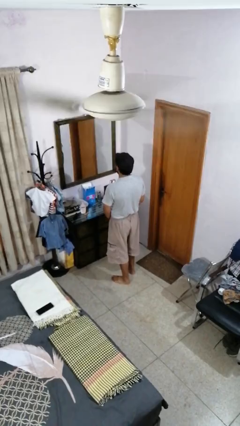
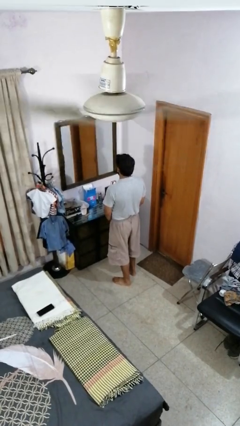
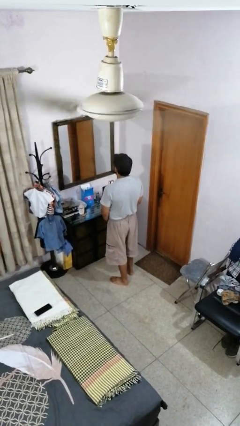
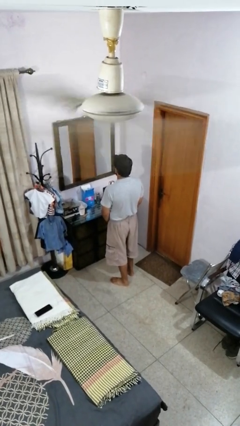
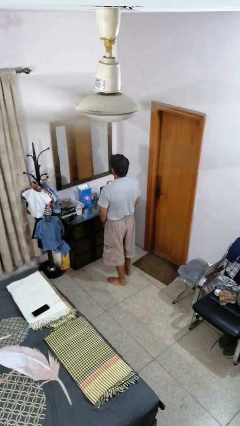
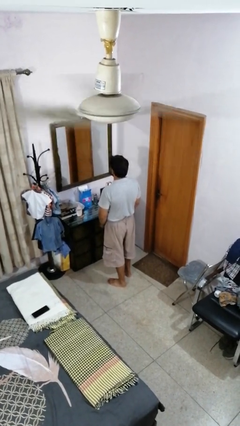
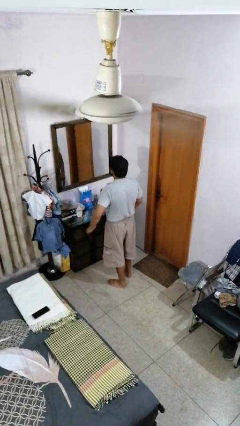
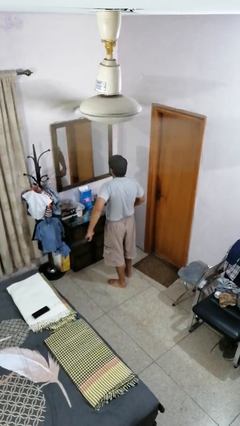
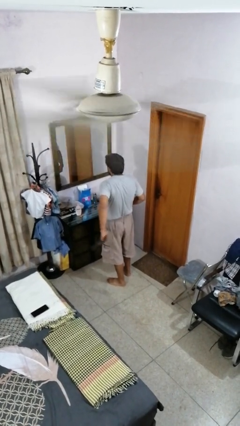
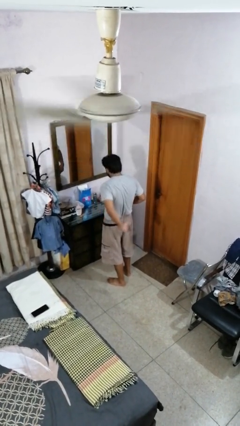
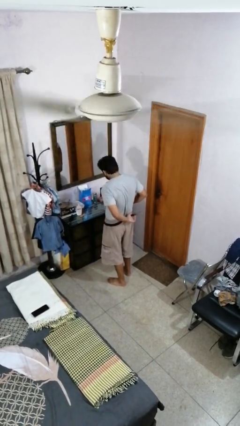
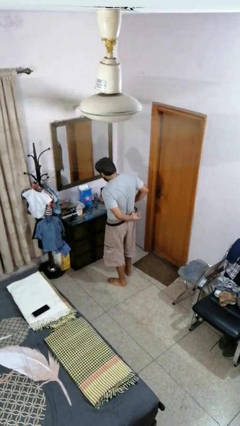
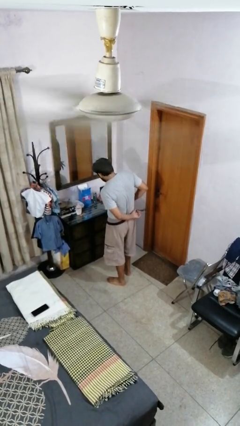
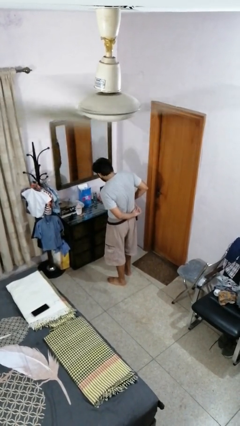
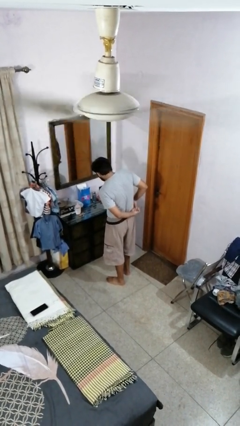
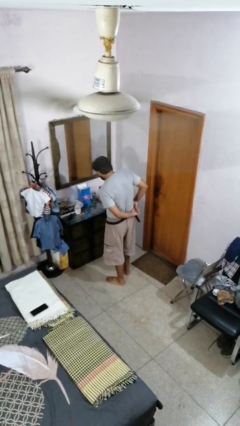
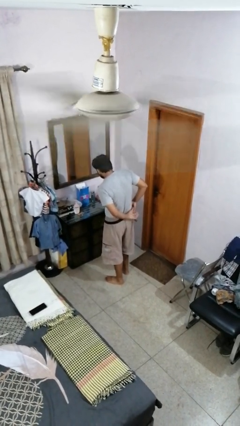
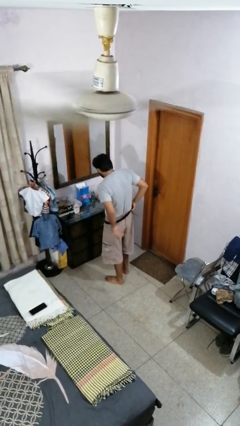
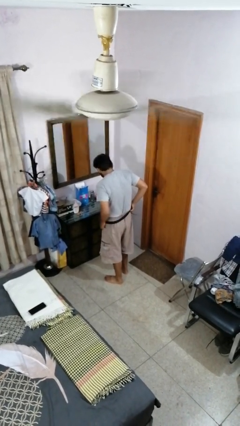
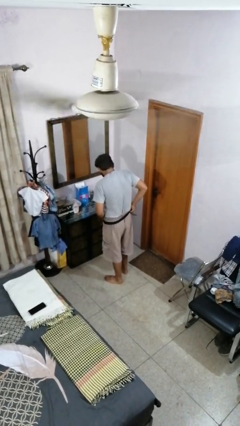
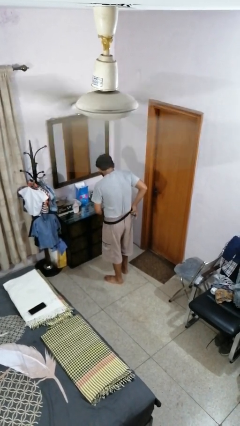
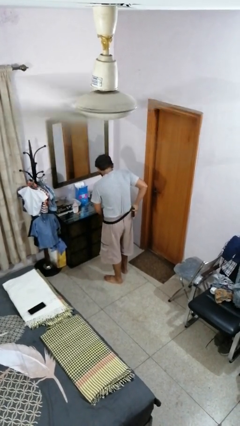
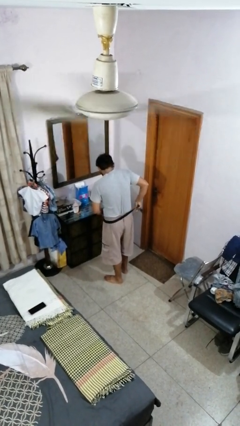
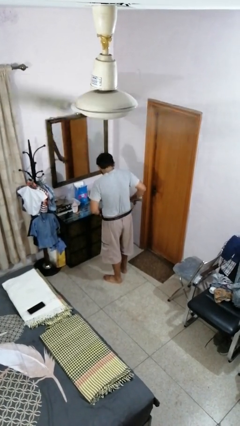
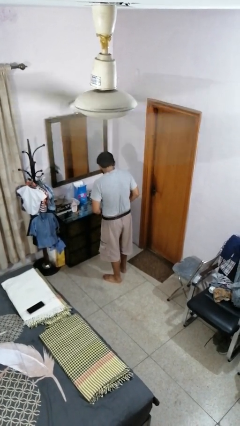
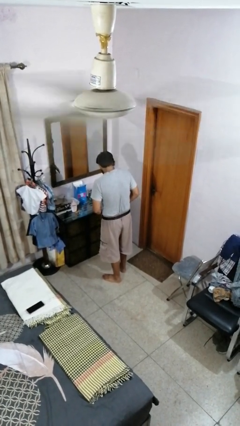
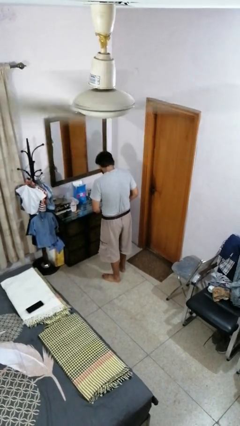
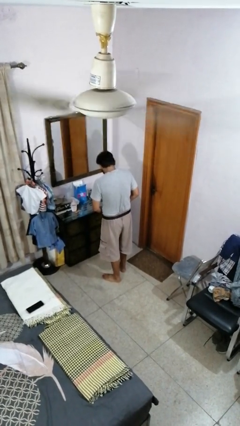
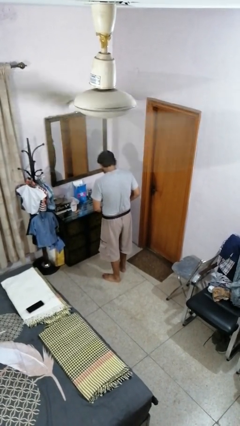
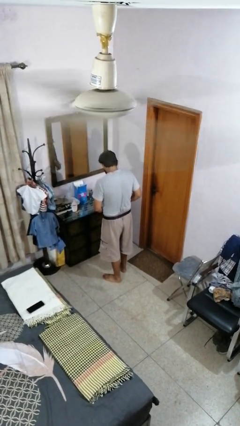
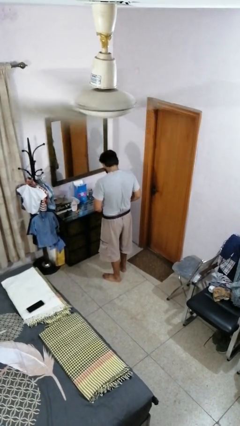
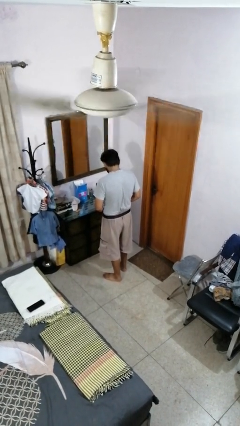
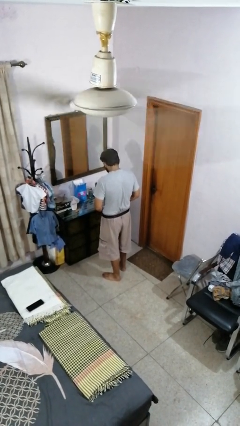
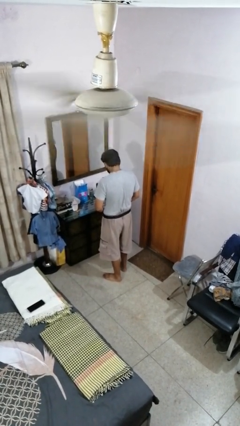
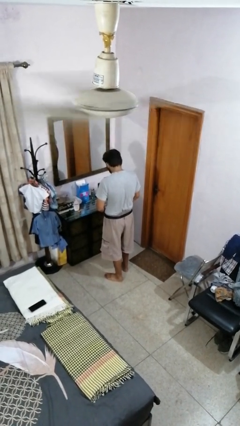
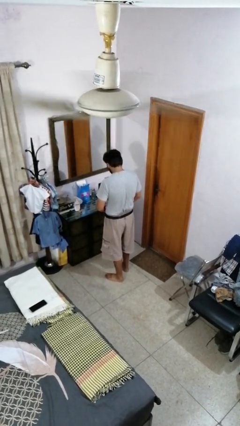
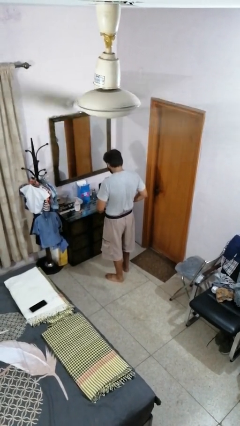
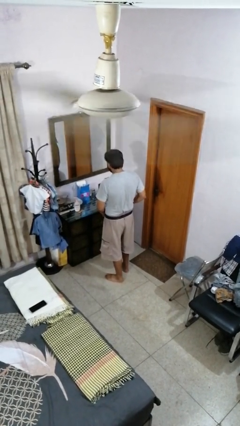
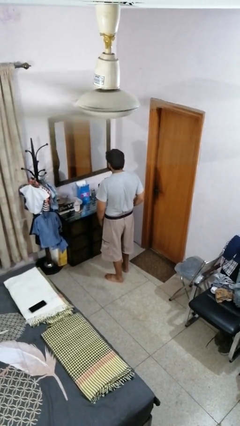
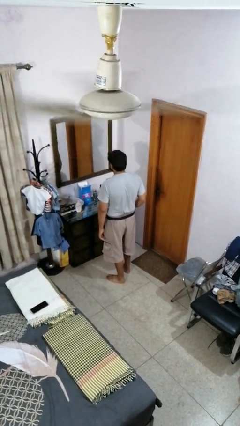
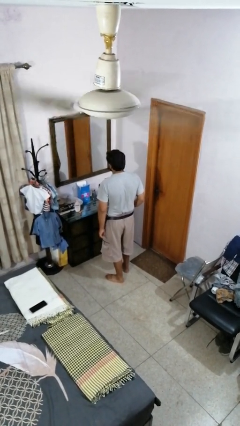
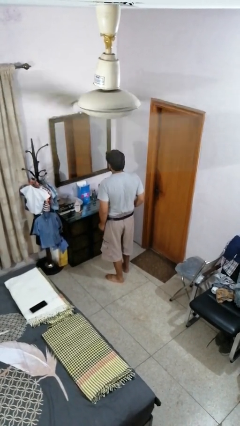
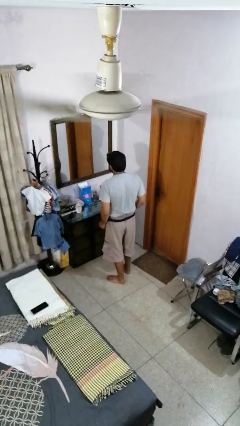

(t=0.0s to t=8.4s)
person puts on belt

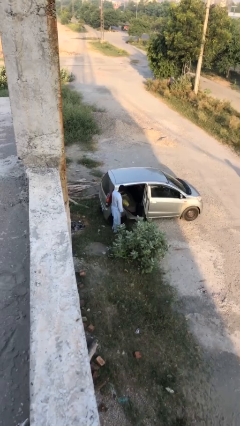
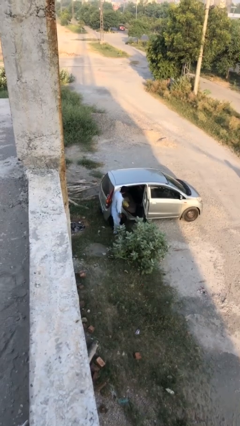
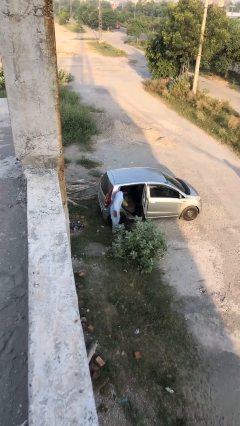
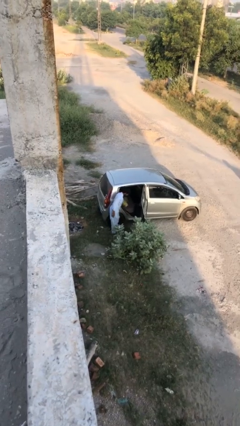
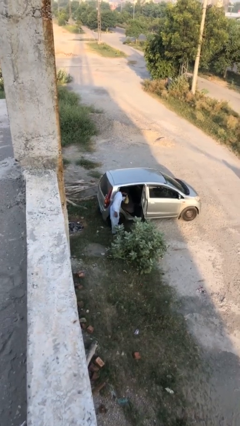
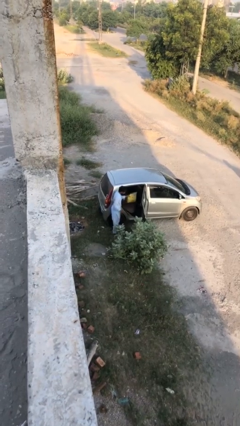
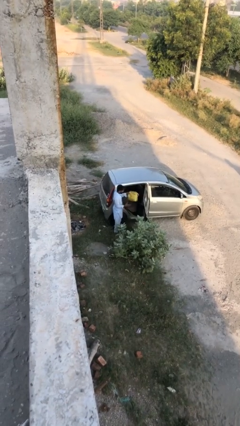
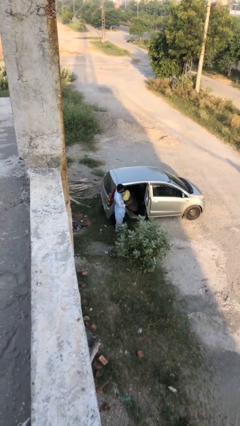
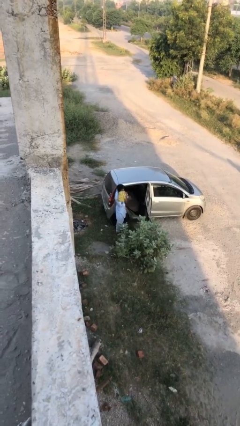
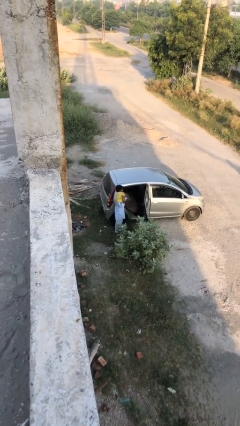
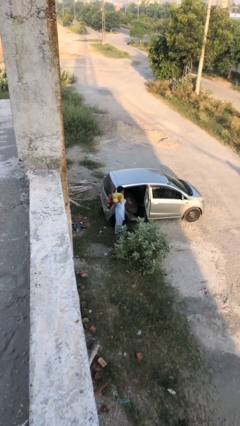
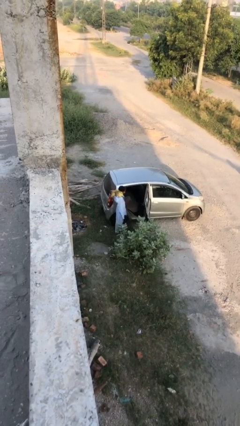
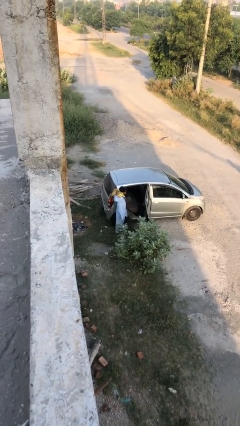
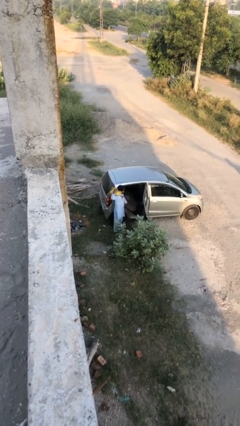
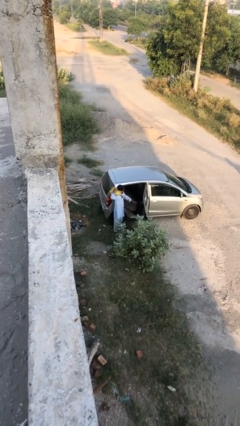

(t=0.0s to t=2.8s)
person unloads car

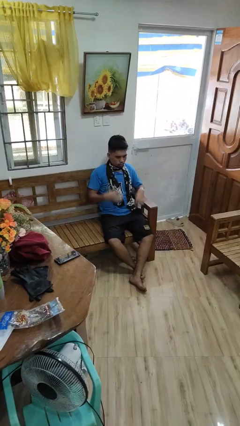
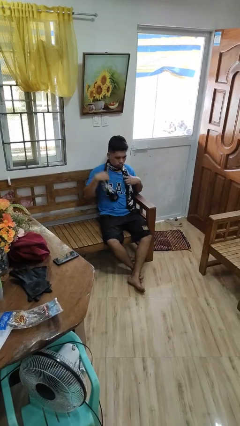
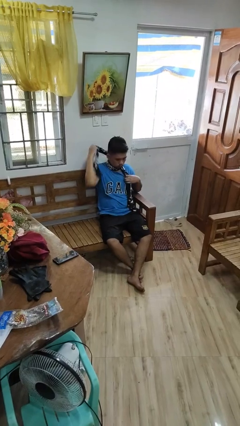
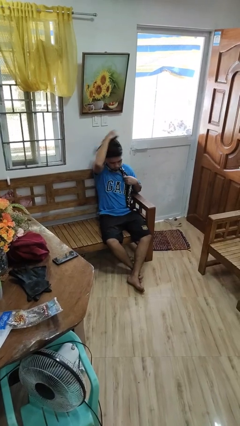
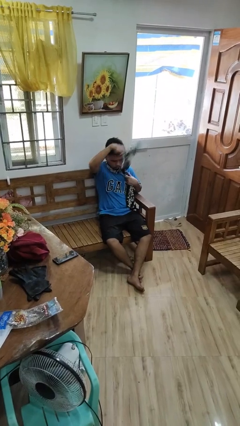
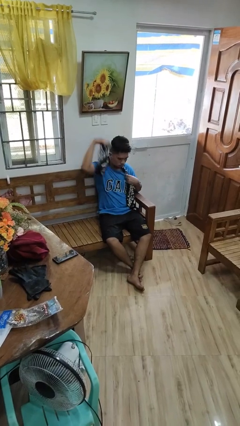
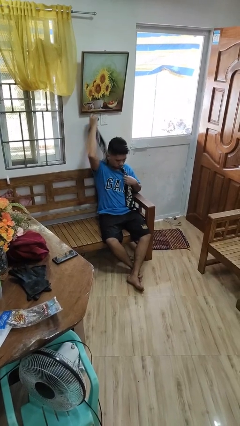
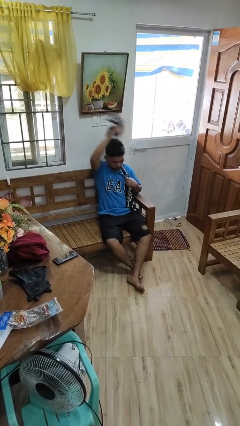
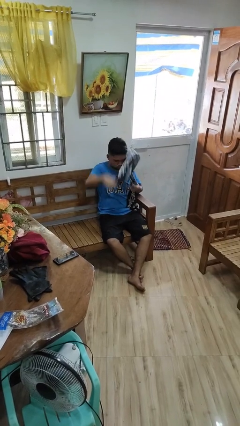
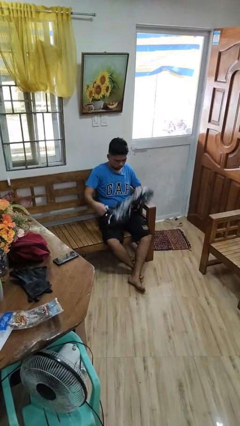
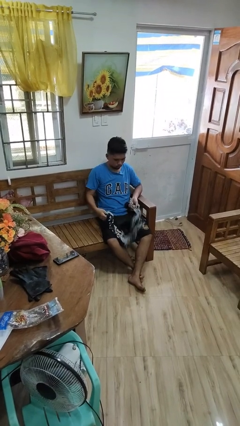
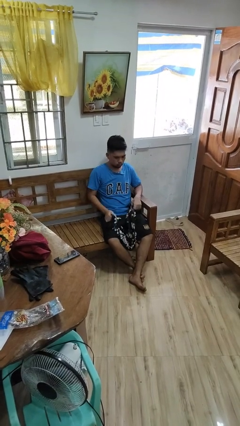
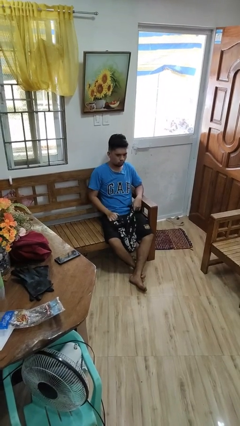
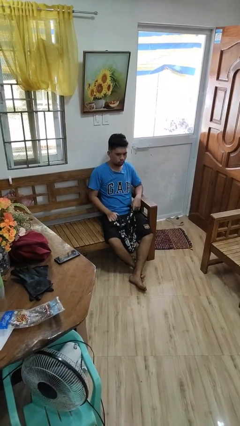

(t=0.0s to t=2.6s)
person takes off scarf

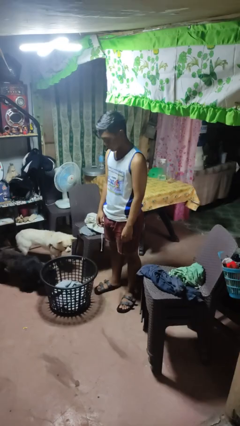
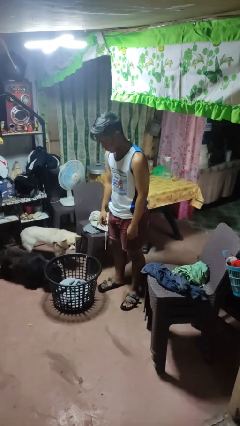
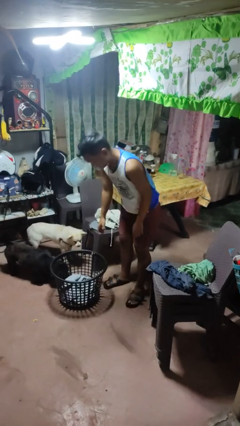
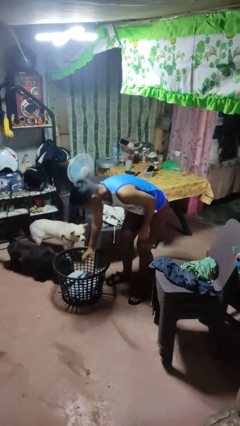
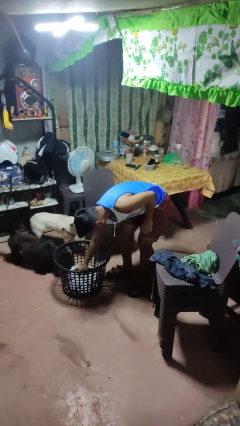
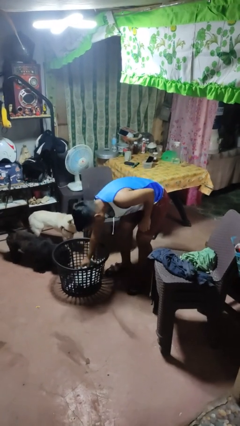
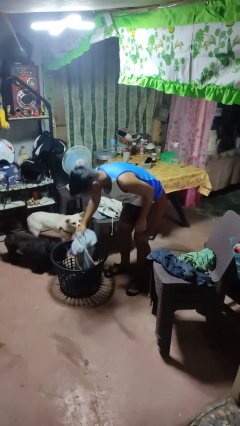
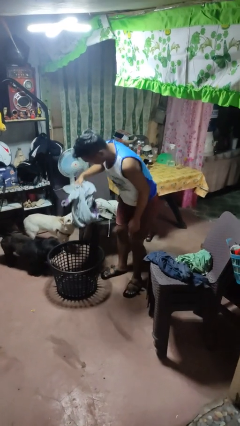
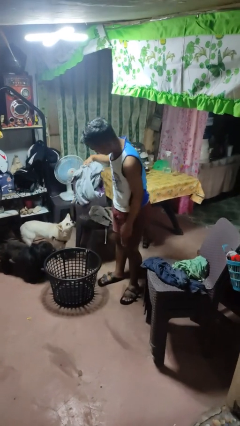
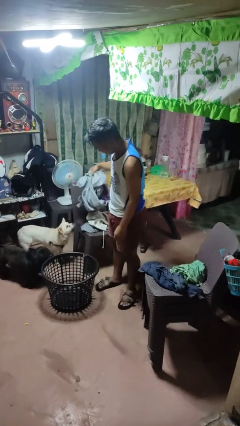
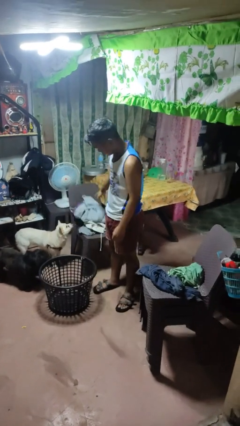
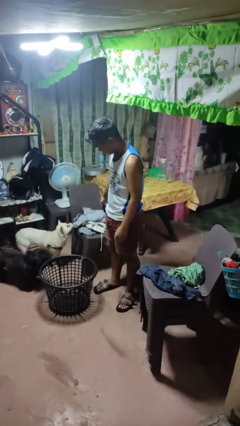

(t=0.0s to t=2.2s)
person takes object from basket

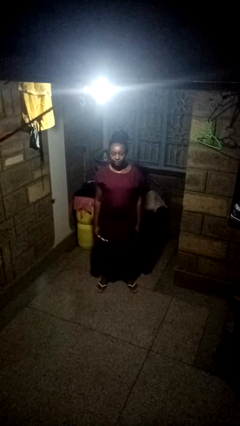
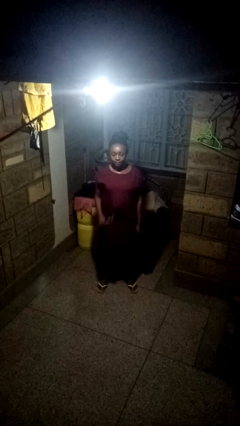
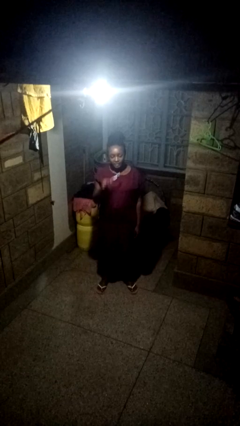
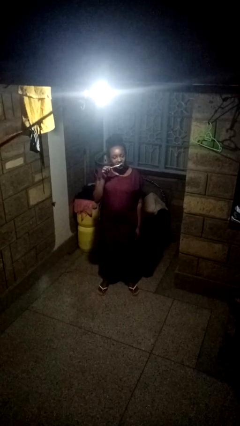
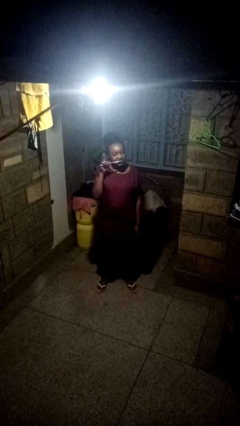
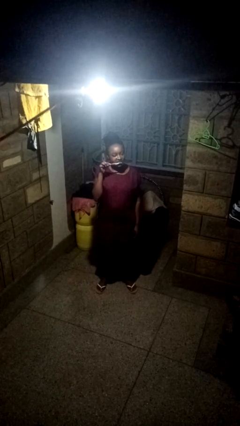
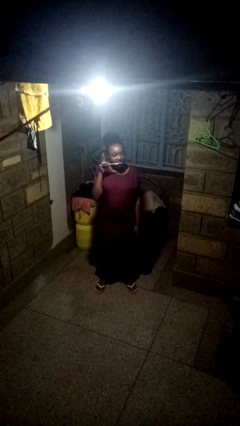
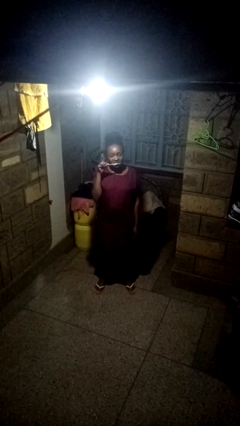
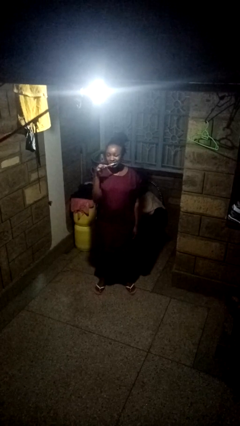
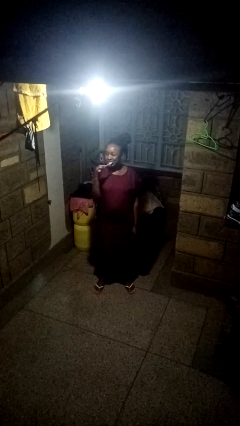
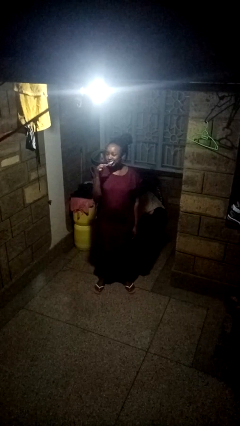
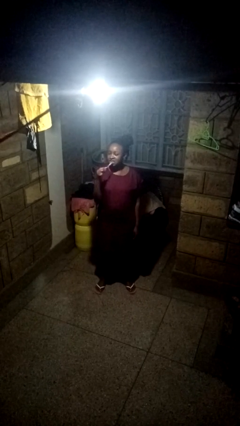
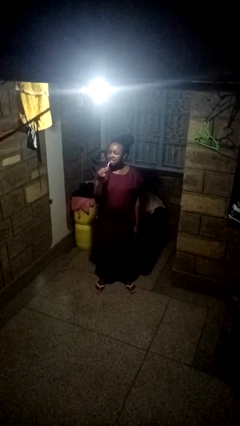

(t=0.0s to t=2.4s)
person brushes teeth
